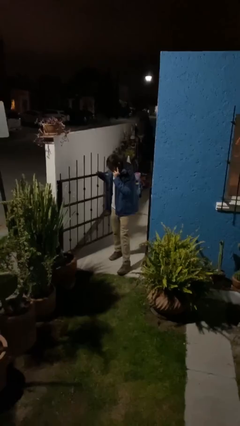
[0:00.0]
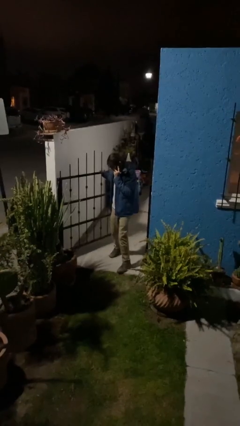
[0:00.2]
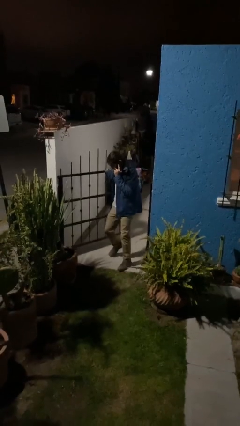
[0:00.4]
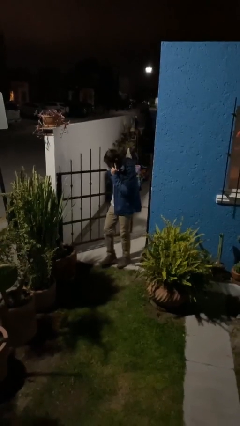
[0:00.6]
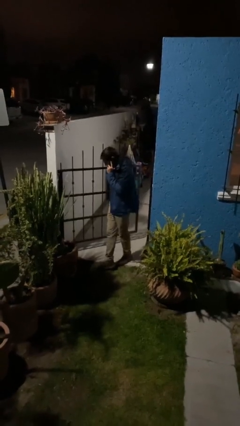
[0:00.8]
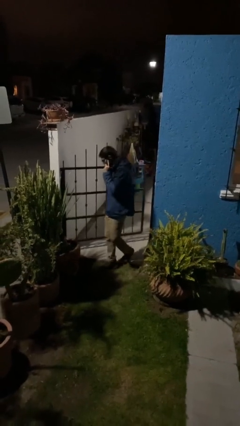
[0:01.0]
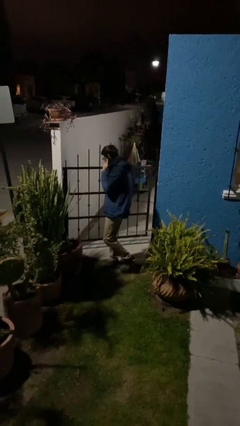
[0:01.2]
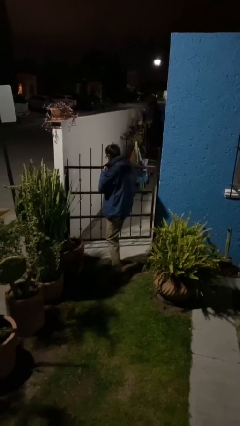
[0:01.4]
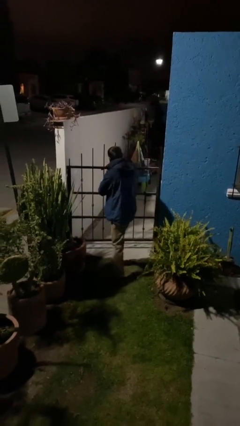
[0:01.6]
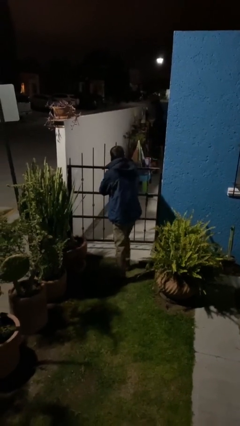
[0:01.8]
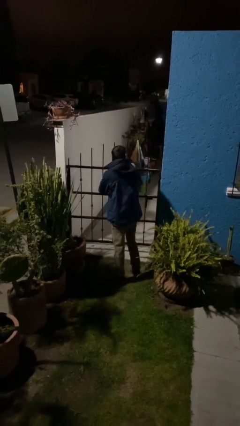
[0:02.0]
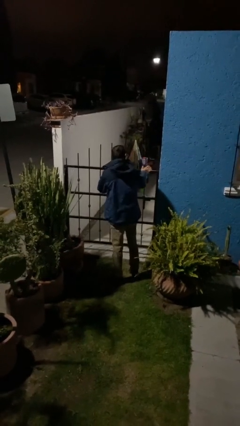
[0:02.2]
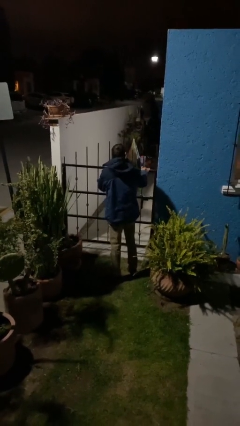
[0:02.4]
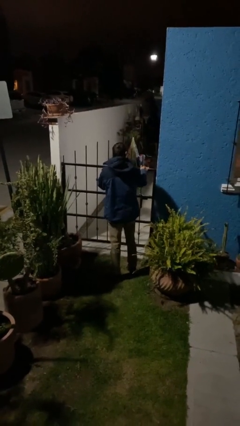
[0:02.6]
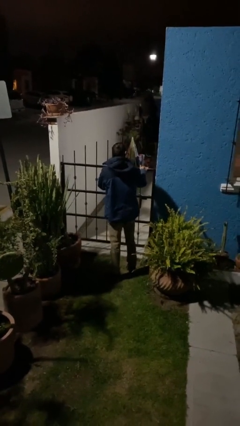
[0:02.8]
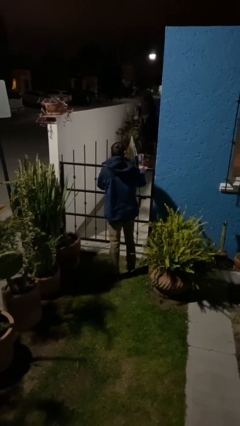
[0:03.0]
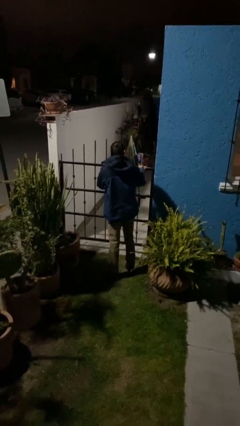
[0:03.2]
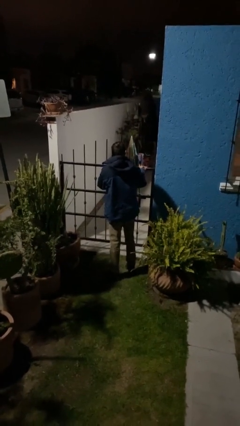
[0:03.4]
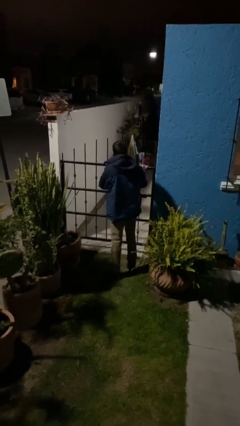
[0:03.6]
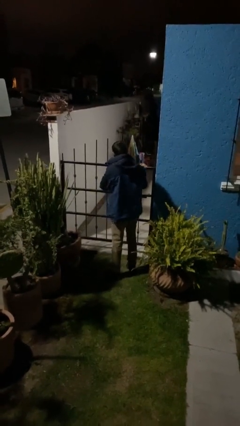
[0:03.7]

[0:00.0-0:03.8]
person closes facility door

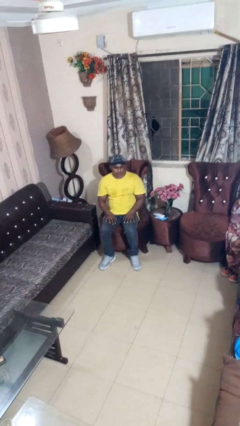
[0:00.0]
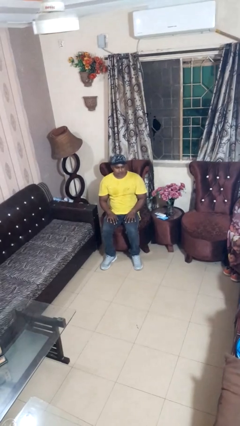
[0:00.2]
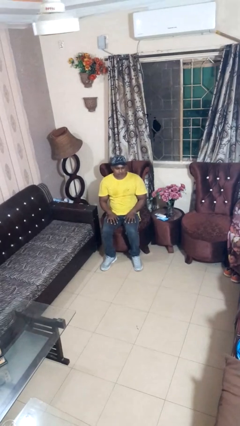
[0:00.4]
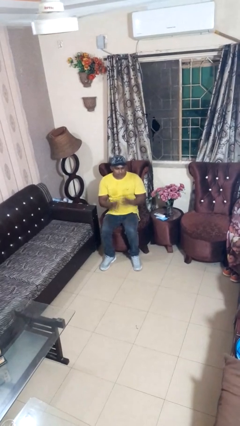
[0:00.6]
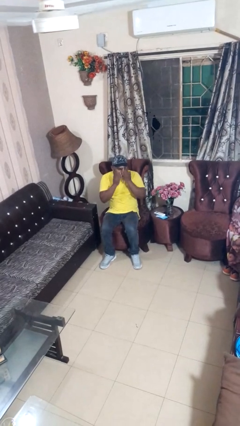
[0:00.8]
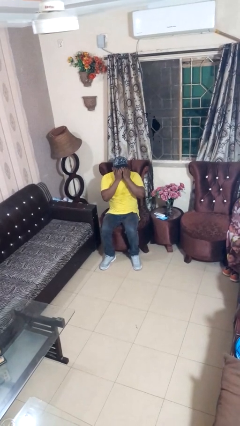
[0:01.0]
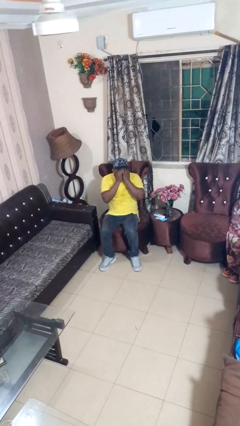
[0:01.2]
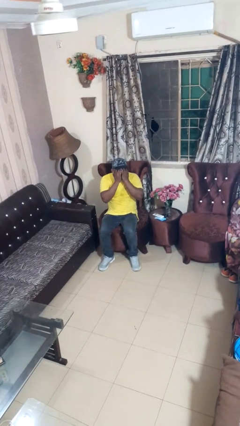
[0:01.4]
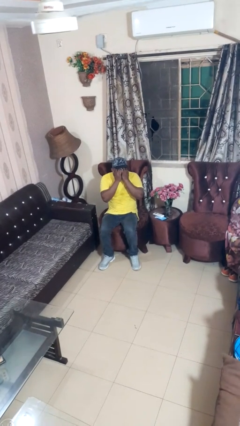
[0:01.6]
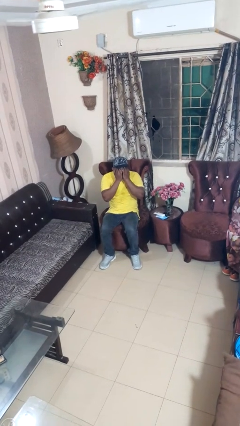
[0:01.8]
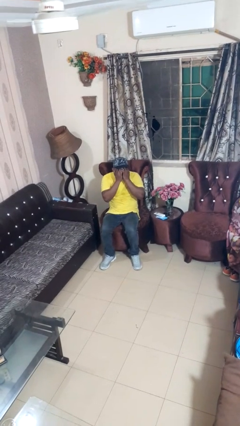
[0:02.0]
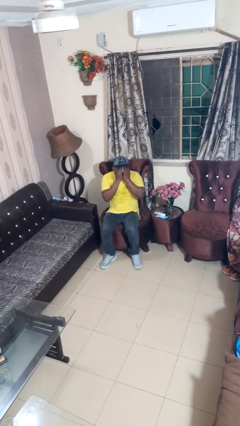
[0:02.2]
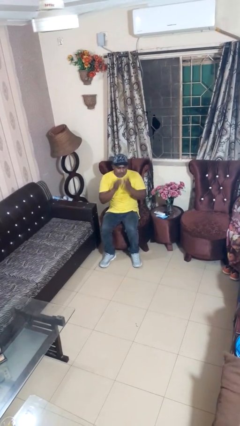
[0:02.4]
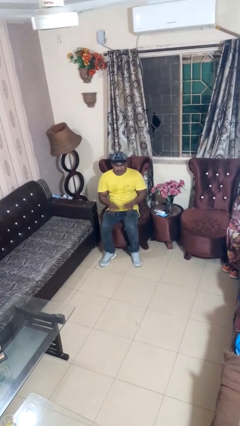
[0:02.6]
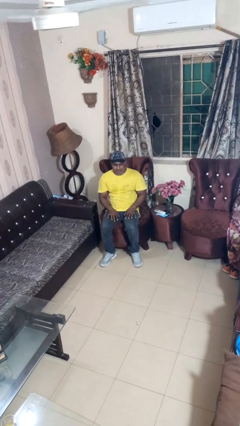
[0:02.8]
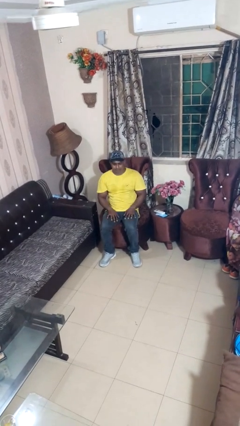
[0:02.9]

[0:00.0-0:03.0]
person covers face with hands

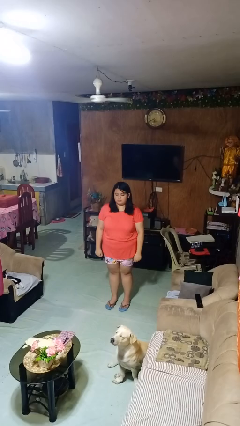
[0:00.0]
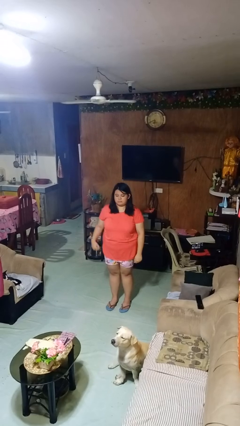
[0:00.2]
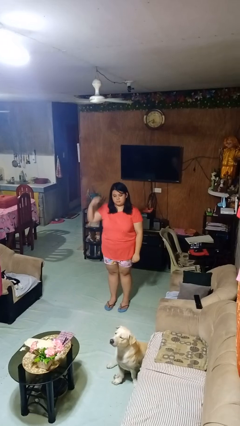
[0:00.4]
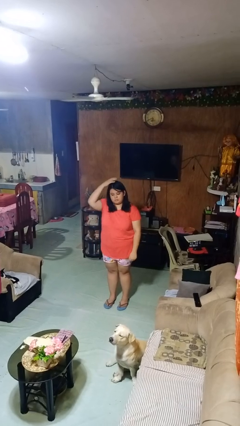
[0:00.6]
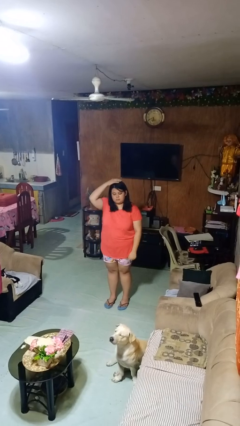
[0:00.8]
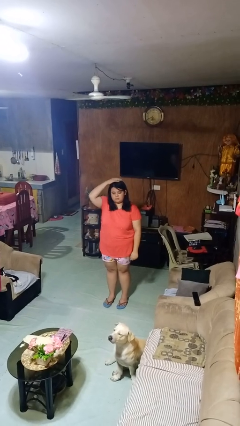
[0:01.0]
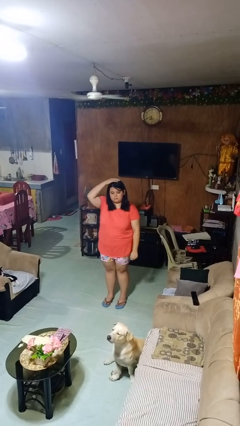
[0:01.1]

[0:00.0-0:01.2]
person pats head

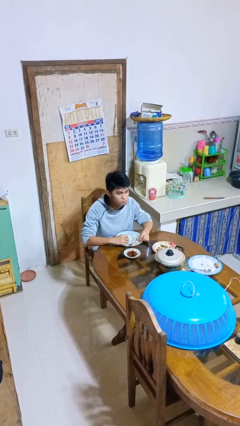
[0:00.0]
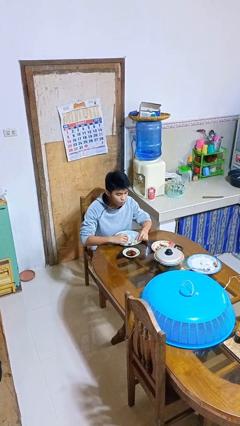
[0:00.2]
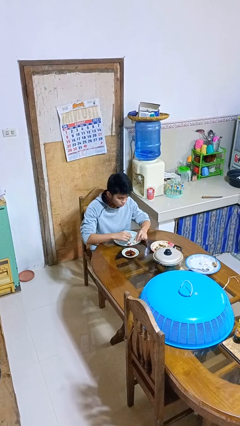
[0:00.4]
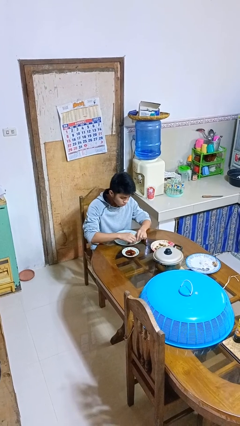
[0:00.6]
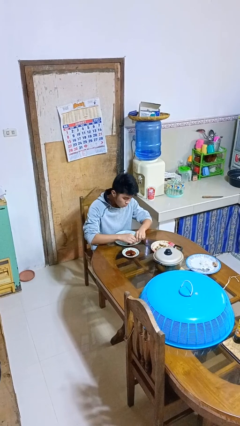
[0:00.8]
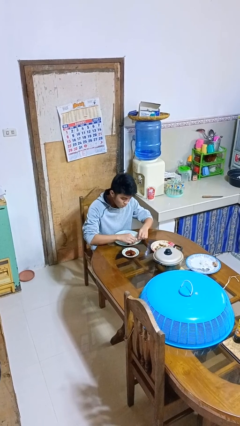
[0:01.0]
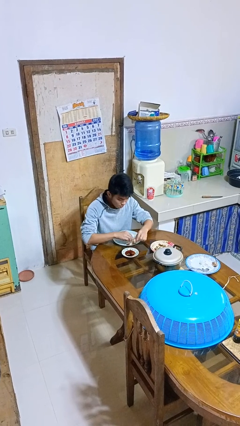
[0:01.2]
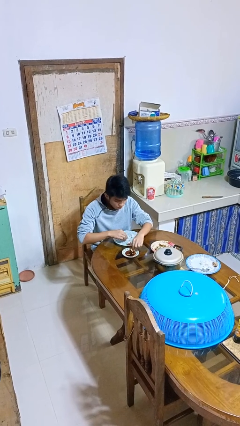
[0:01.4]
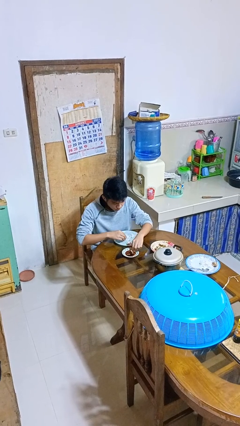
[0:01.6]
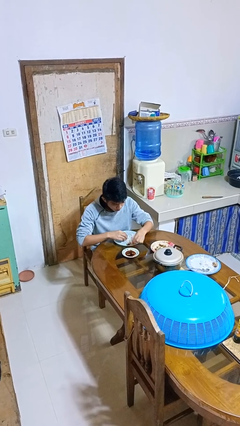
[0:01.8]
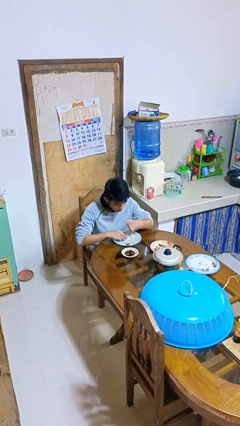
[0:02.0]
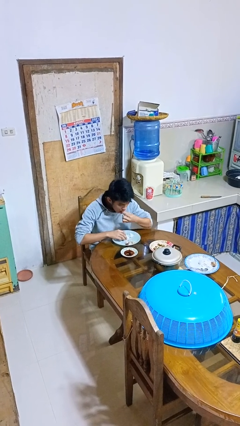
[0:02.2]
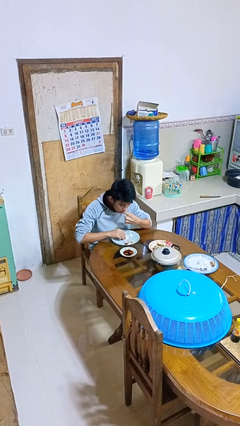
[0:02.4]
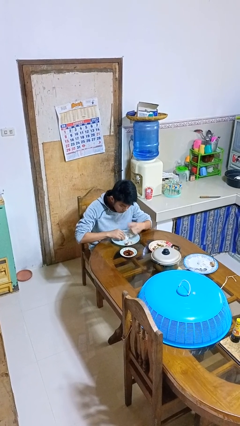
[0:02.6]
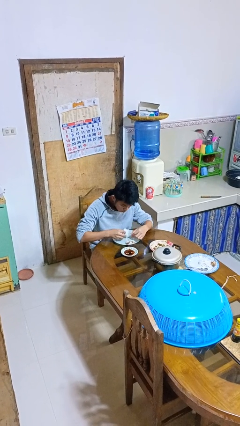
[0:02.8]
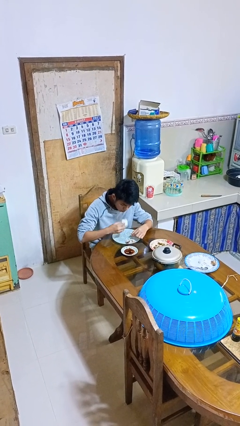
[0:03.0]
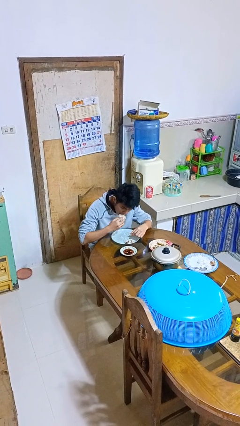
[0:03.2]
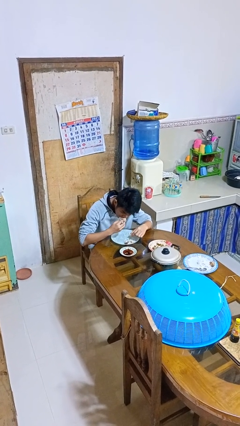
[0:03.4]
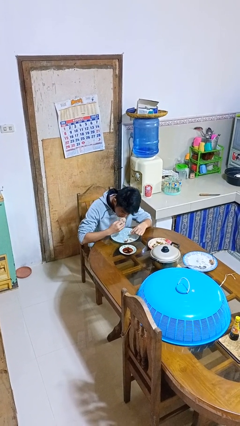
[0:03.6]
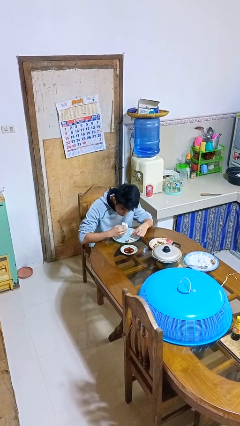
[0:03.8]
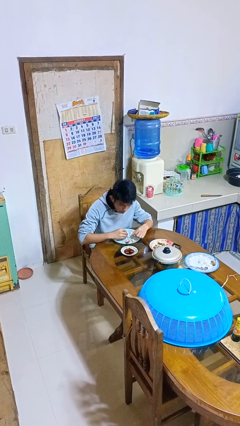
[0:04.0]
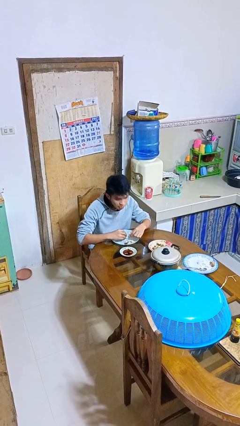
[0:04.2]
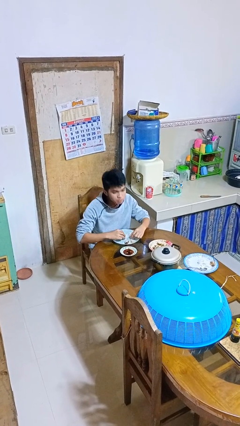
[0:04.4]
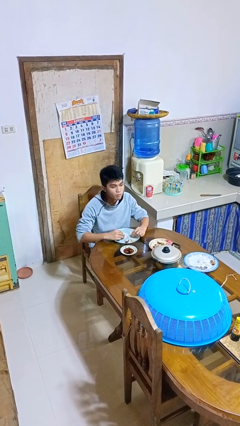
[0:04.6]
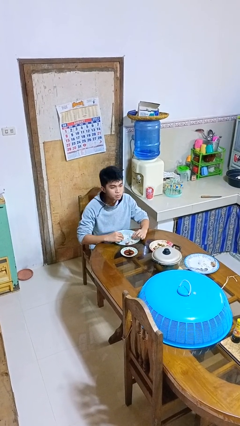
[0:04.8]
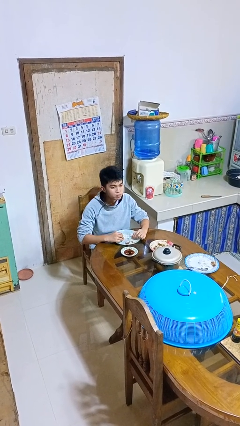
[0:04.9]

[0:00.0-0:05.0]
person eats with hands

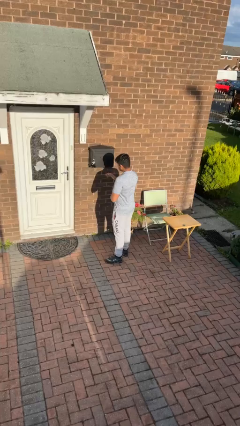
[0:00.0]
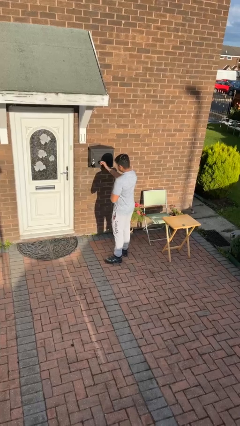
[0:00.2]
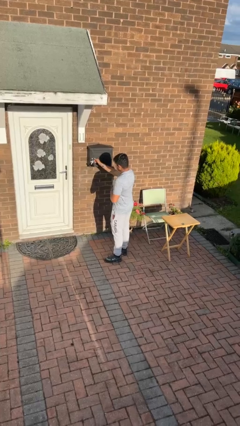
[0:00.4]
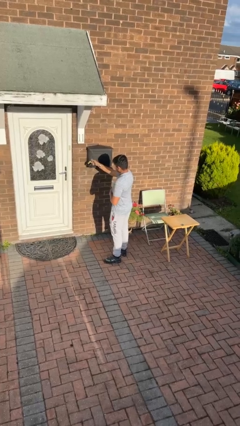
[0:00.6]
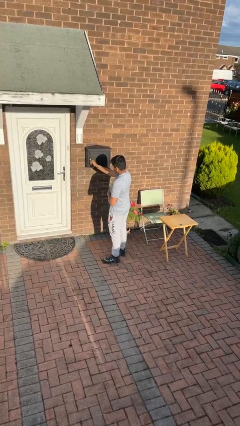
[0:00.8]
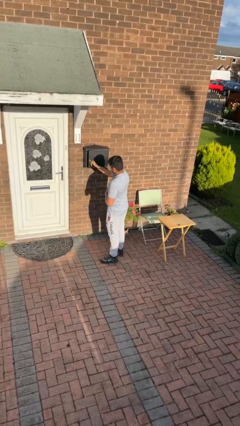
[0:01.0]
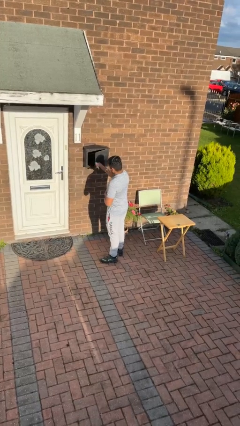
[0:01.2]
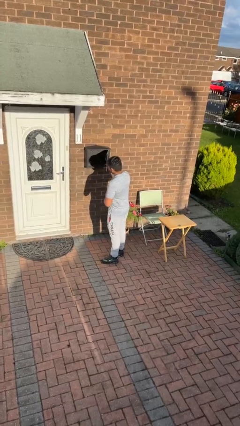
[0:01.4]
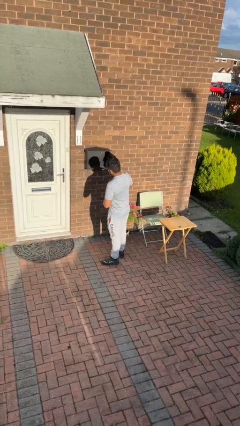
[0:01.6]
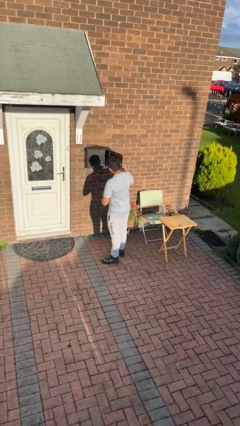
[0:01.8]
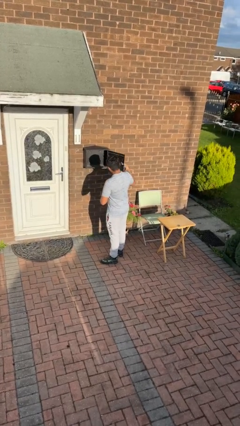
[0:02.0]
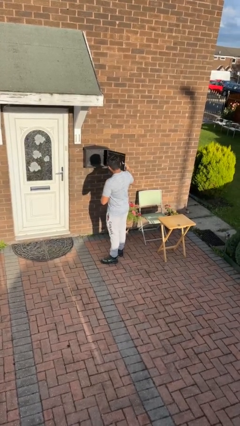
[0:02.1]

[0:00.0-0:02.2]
person opens mailbox

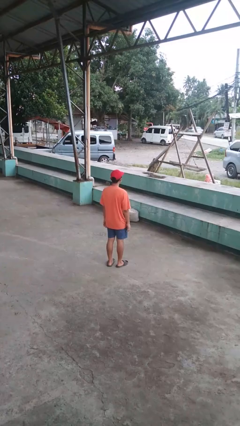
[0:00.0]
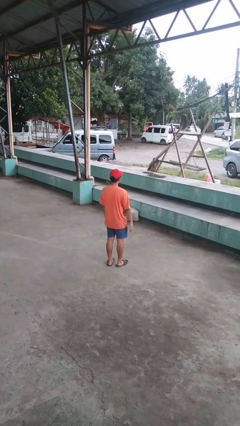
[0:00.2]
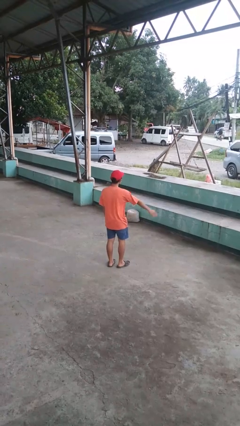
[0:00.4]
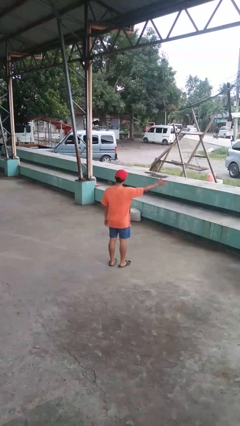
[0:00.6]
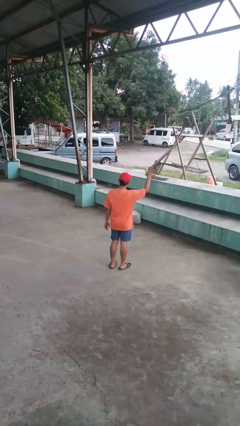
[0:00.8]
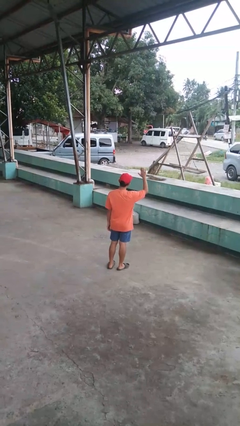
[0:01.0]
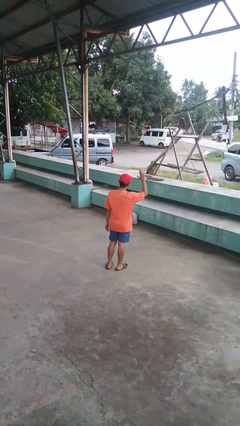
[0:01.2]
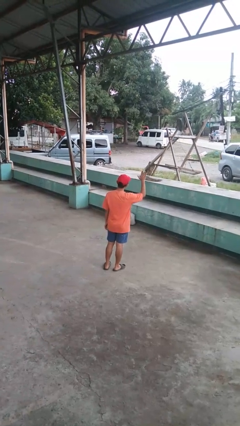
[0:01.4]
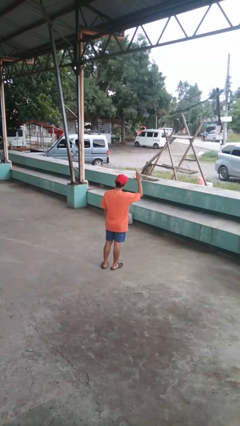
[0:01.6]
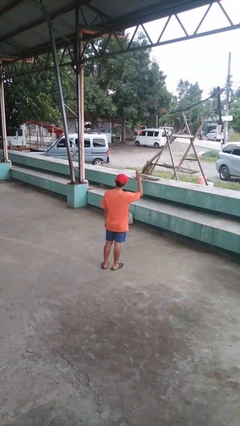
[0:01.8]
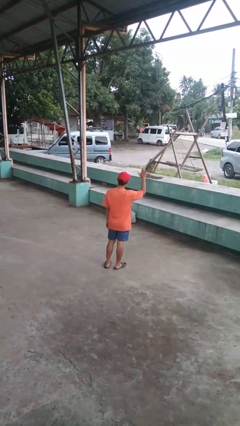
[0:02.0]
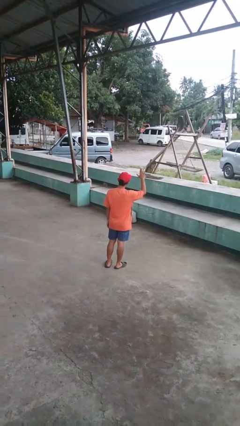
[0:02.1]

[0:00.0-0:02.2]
person waves at person
